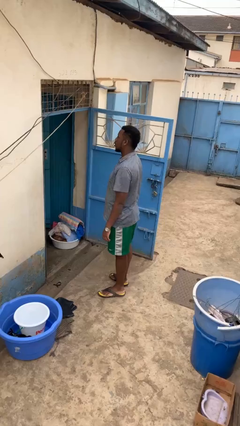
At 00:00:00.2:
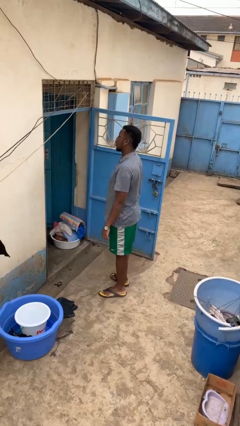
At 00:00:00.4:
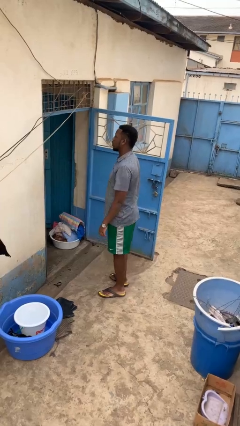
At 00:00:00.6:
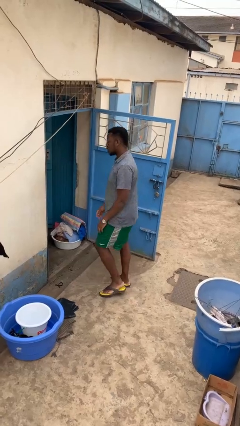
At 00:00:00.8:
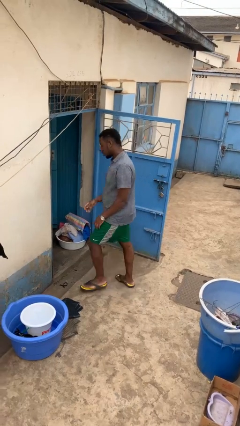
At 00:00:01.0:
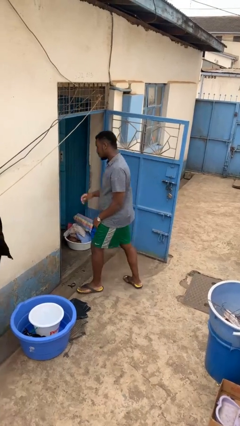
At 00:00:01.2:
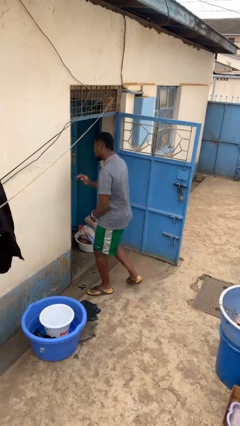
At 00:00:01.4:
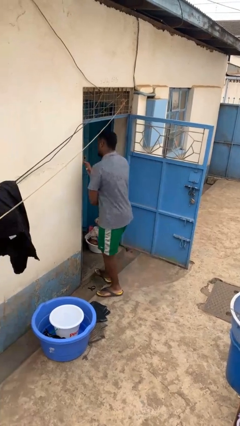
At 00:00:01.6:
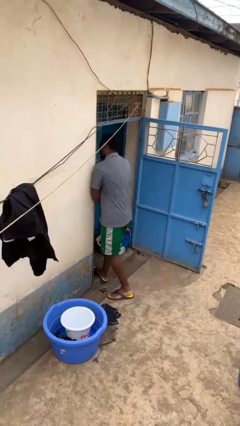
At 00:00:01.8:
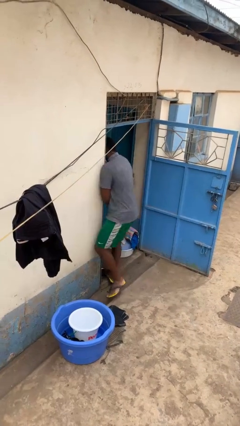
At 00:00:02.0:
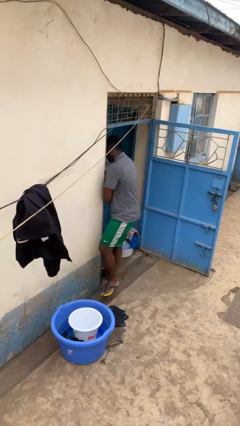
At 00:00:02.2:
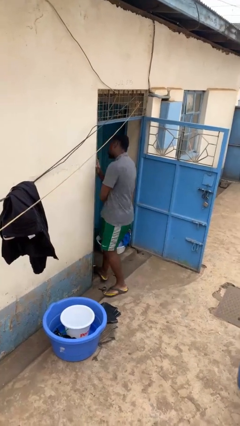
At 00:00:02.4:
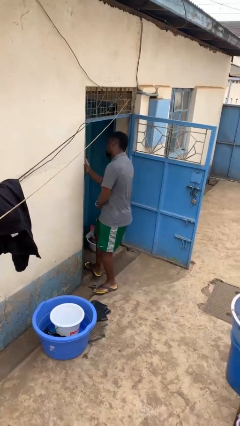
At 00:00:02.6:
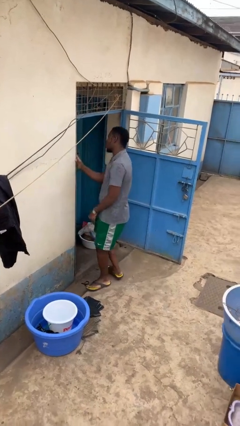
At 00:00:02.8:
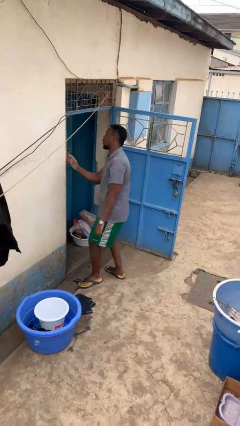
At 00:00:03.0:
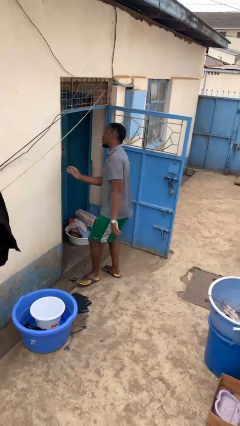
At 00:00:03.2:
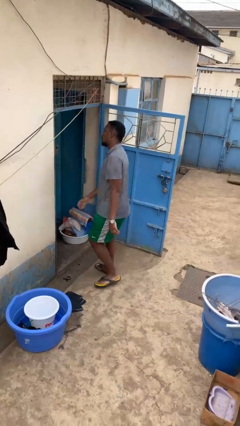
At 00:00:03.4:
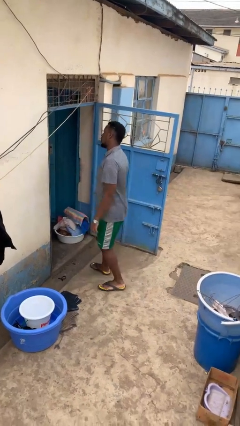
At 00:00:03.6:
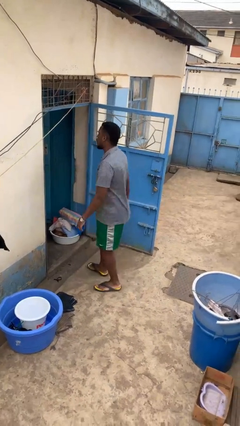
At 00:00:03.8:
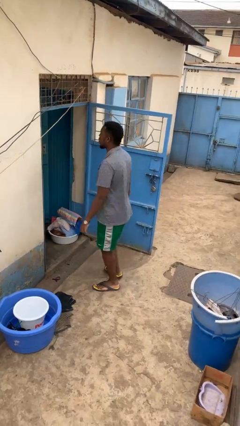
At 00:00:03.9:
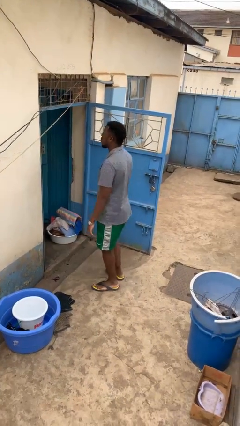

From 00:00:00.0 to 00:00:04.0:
person bumps into wall

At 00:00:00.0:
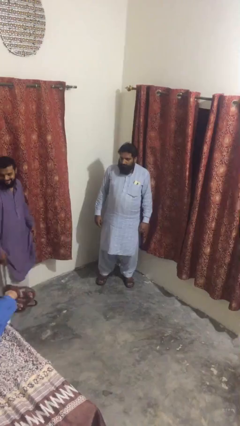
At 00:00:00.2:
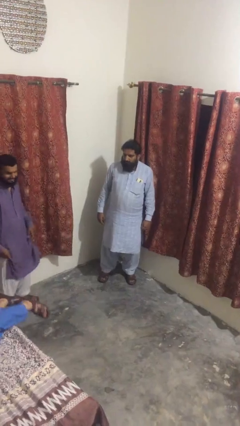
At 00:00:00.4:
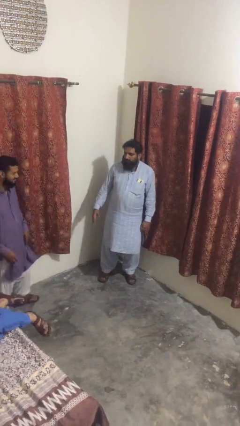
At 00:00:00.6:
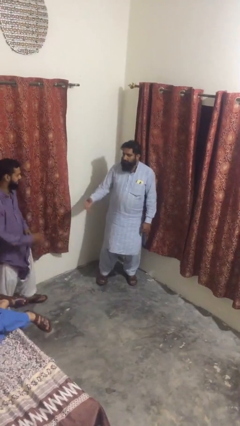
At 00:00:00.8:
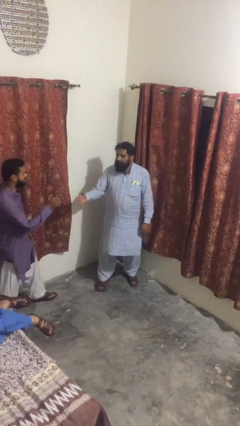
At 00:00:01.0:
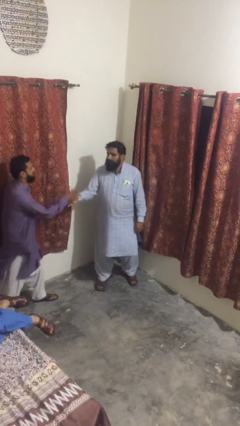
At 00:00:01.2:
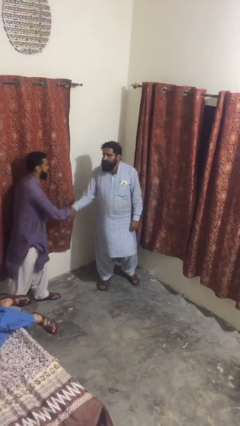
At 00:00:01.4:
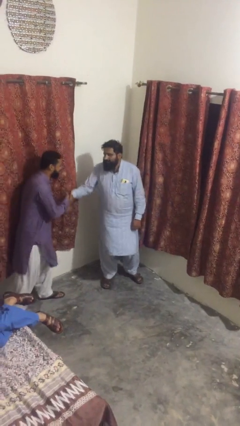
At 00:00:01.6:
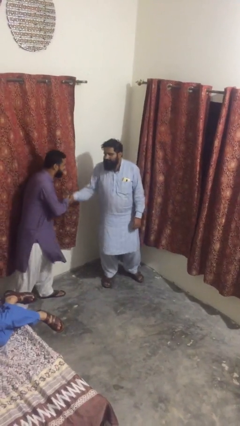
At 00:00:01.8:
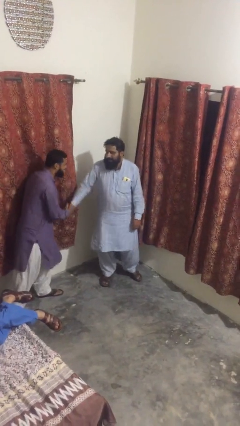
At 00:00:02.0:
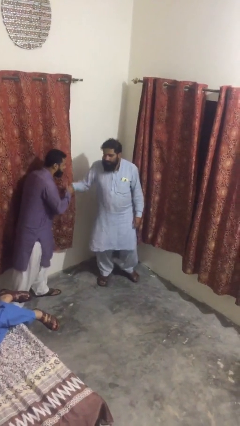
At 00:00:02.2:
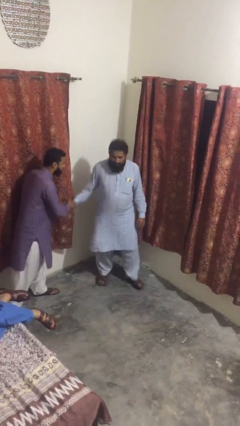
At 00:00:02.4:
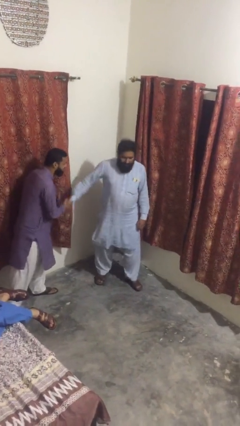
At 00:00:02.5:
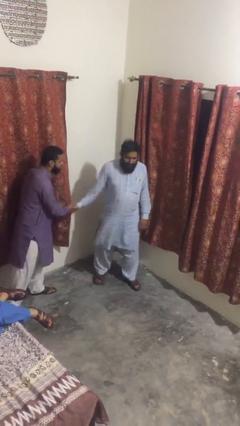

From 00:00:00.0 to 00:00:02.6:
person shakes hand

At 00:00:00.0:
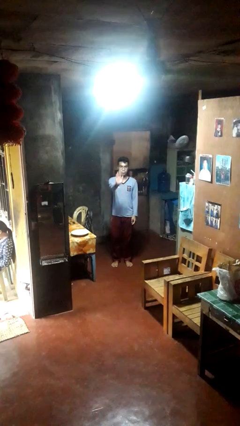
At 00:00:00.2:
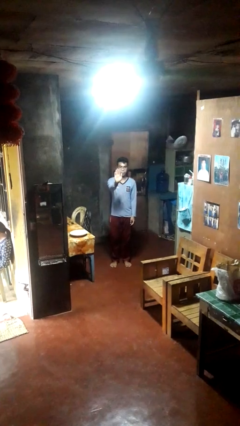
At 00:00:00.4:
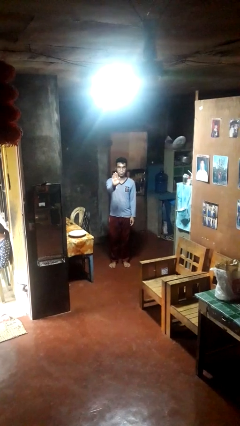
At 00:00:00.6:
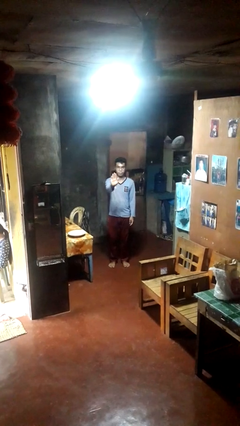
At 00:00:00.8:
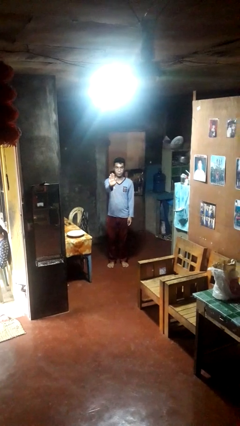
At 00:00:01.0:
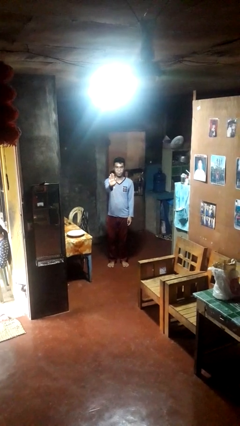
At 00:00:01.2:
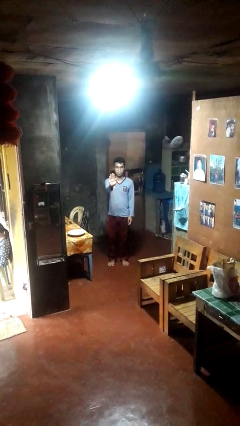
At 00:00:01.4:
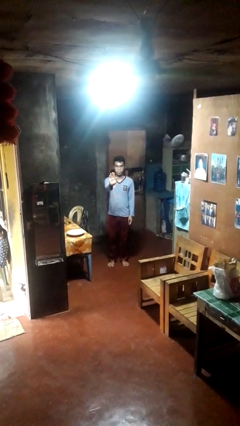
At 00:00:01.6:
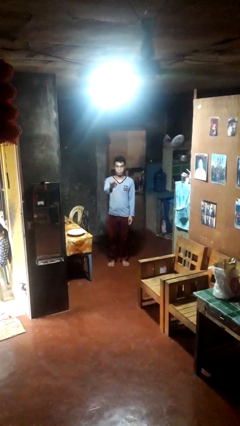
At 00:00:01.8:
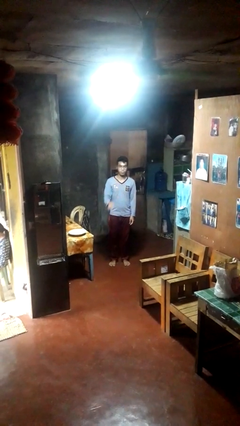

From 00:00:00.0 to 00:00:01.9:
person gestures stop

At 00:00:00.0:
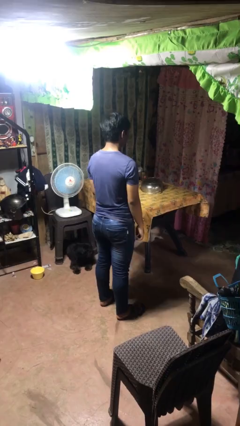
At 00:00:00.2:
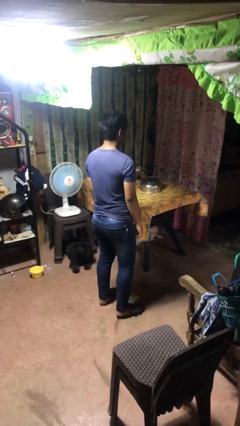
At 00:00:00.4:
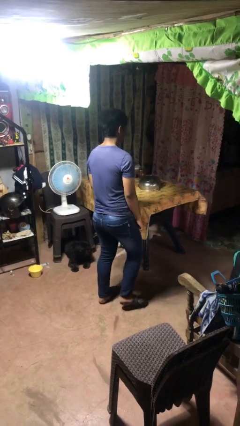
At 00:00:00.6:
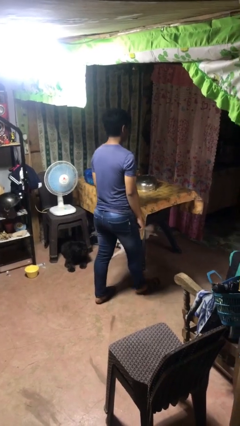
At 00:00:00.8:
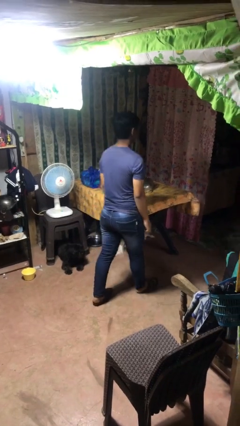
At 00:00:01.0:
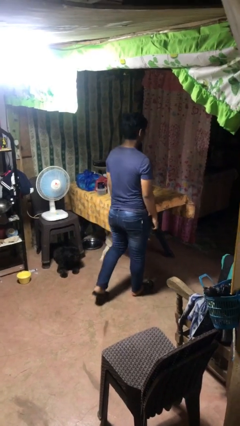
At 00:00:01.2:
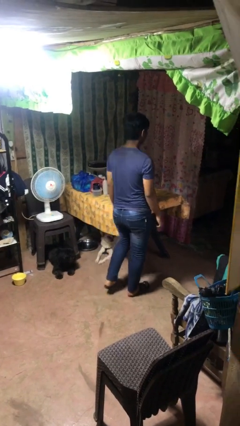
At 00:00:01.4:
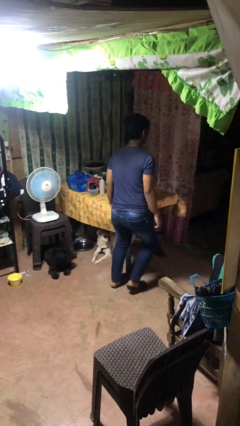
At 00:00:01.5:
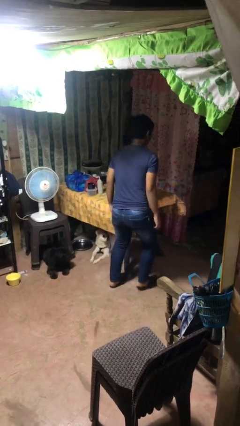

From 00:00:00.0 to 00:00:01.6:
person bumps into table

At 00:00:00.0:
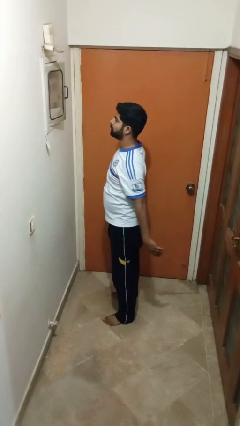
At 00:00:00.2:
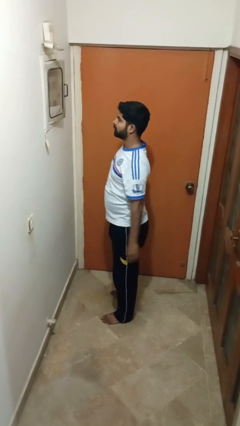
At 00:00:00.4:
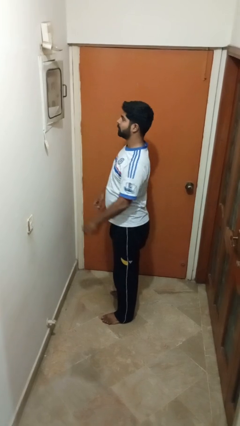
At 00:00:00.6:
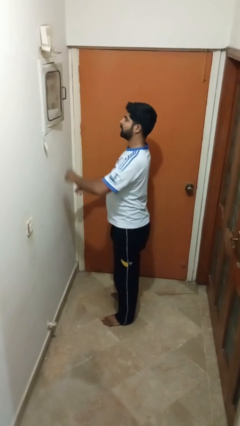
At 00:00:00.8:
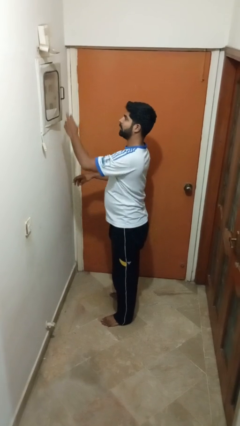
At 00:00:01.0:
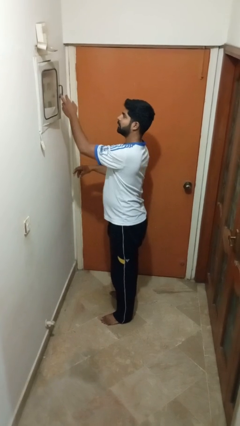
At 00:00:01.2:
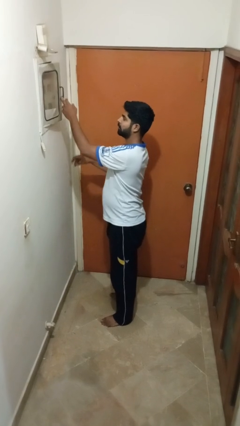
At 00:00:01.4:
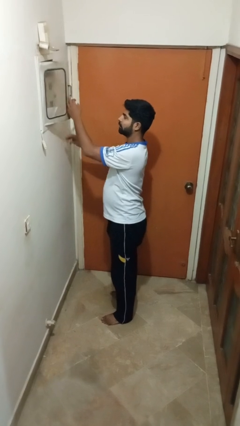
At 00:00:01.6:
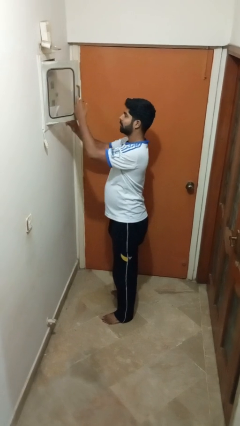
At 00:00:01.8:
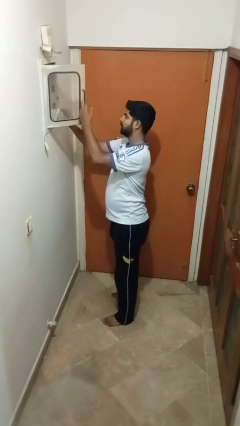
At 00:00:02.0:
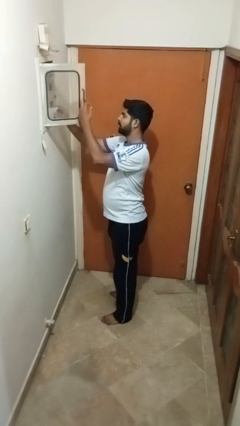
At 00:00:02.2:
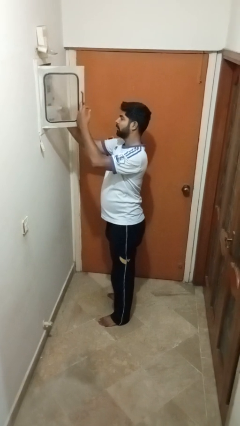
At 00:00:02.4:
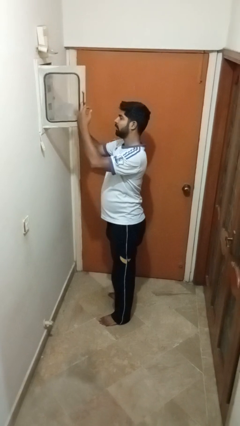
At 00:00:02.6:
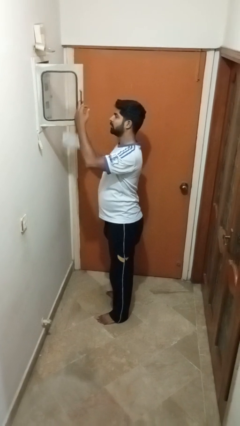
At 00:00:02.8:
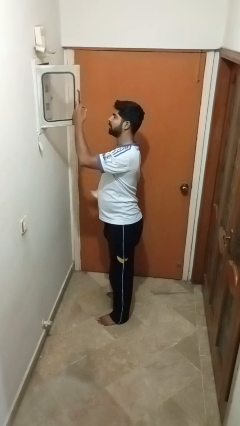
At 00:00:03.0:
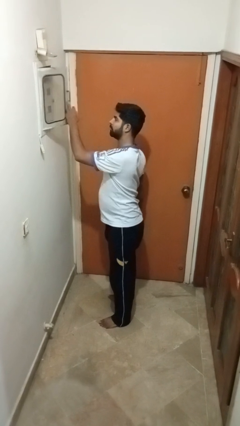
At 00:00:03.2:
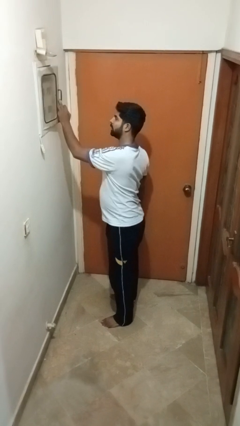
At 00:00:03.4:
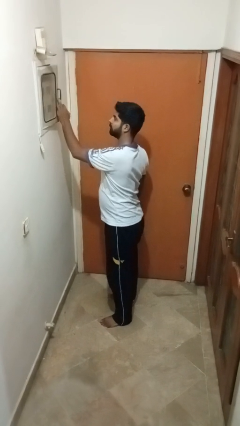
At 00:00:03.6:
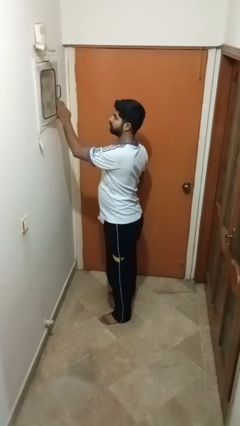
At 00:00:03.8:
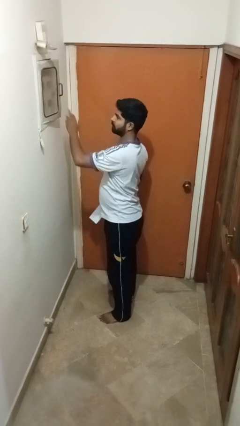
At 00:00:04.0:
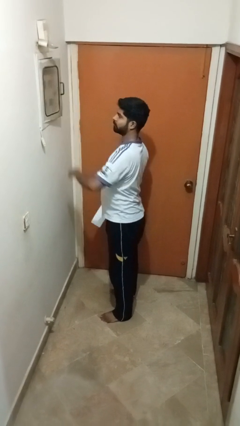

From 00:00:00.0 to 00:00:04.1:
person takes letters from mailbox

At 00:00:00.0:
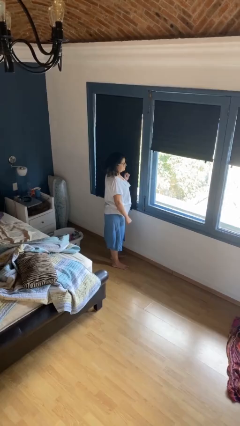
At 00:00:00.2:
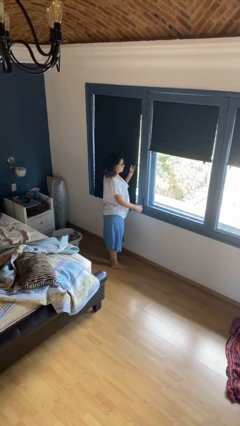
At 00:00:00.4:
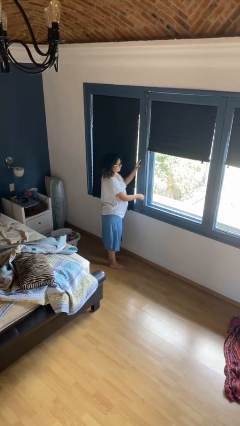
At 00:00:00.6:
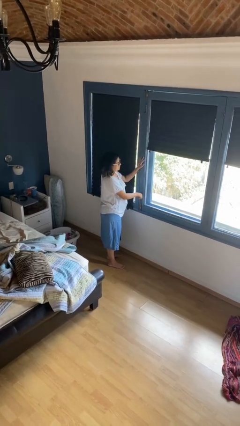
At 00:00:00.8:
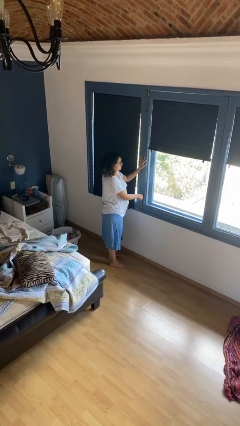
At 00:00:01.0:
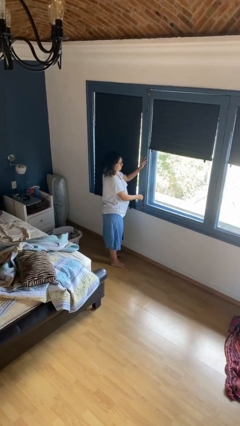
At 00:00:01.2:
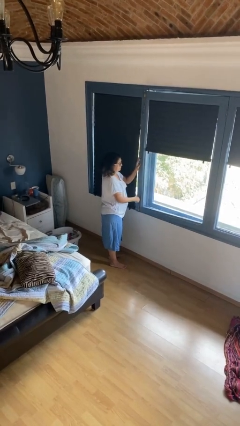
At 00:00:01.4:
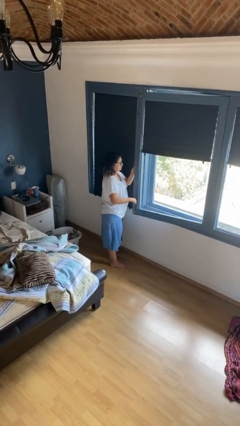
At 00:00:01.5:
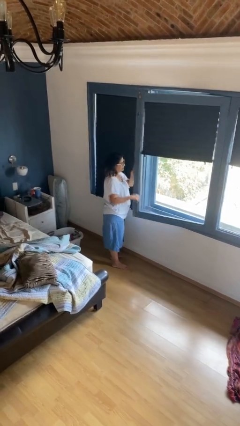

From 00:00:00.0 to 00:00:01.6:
person opens home window

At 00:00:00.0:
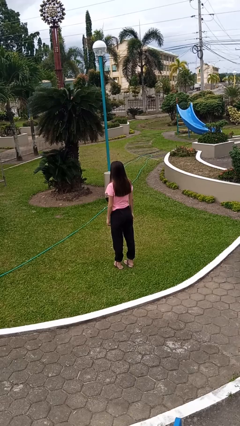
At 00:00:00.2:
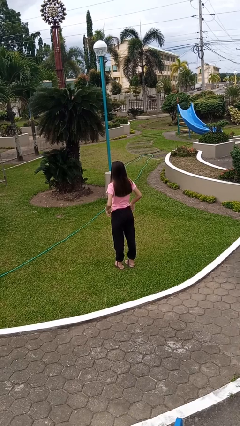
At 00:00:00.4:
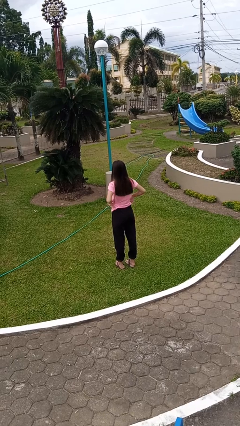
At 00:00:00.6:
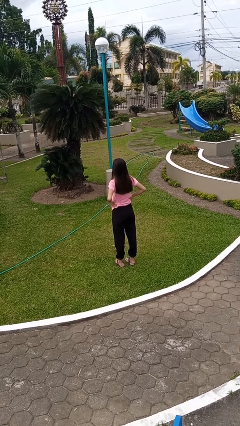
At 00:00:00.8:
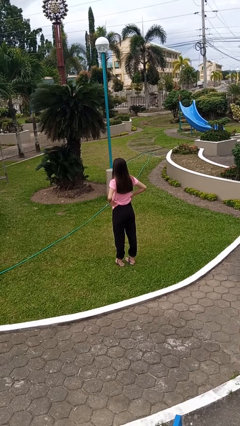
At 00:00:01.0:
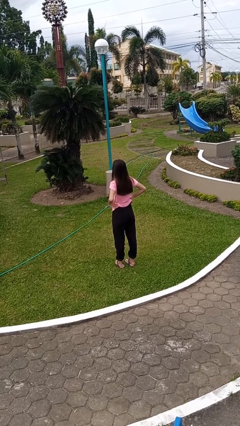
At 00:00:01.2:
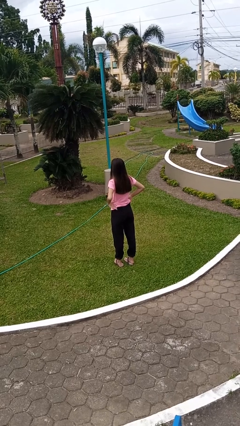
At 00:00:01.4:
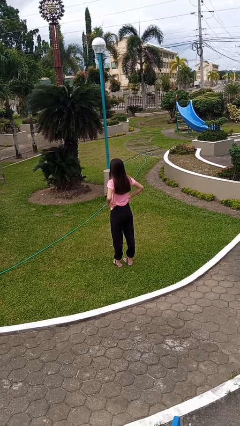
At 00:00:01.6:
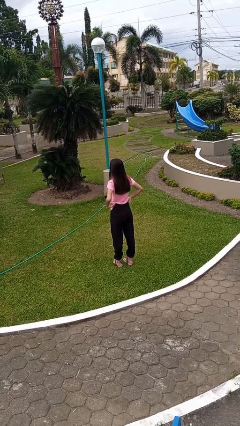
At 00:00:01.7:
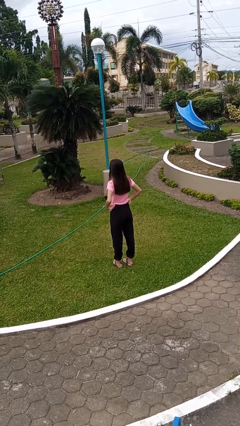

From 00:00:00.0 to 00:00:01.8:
person hikes up pants
